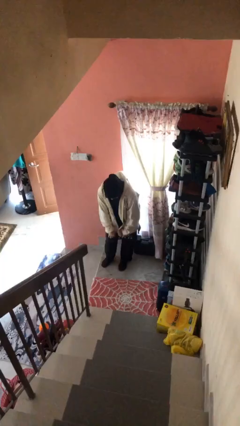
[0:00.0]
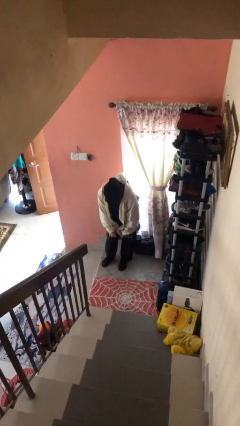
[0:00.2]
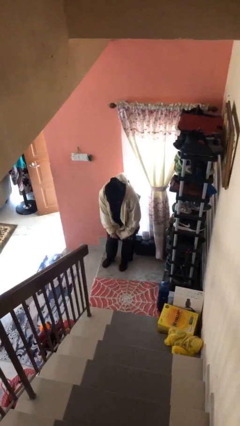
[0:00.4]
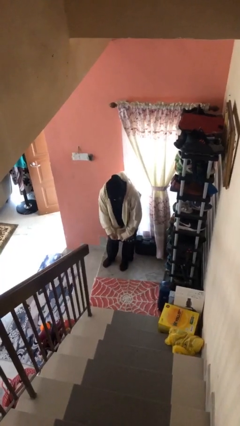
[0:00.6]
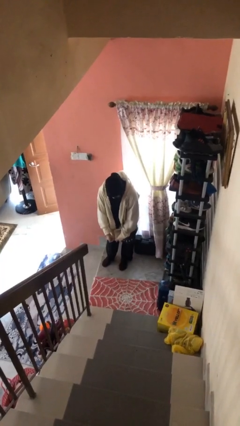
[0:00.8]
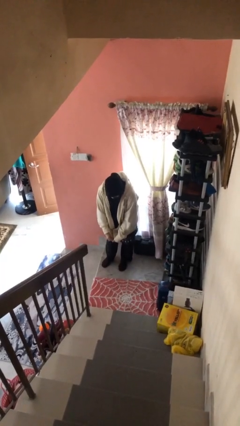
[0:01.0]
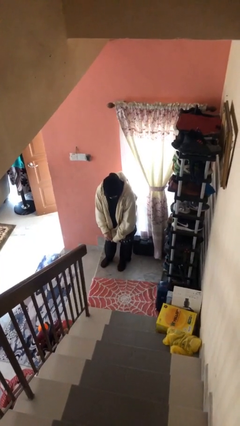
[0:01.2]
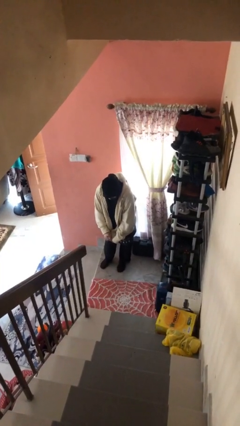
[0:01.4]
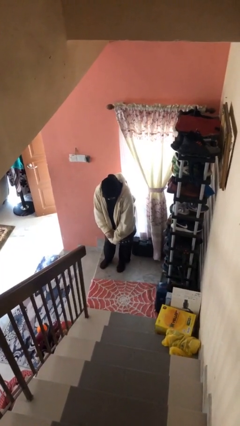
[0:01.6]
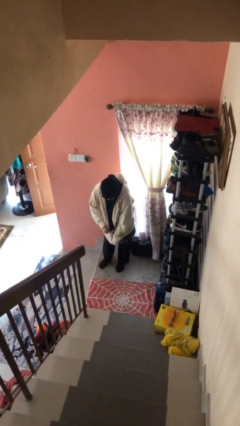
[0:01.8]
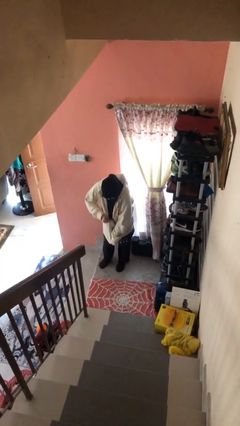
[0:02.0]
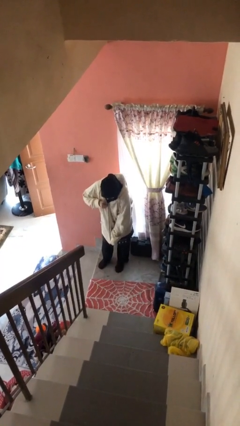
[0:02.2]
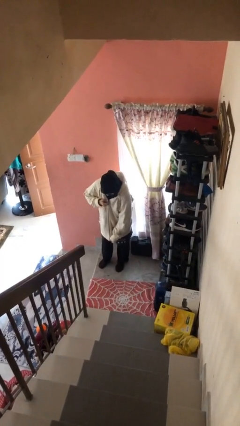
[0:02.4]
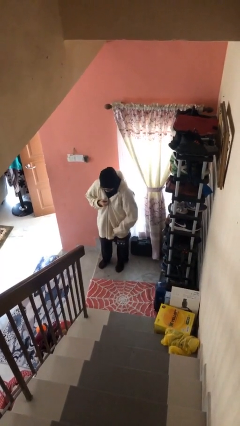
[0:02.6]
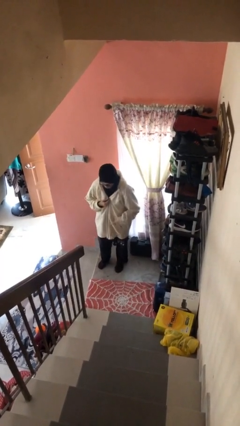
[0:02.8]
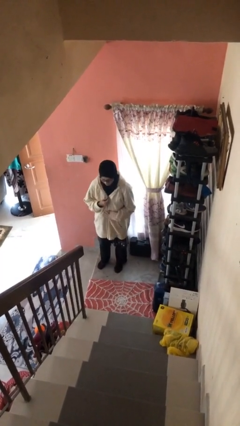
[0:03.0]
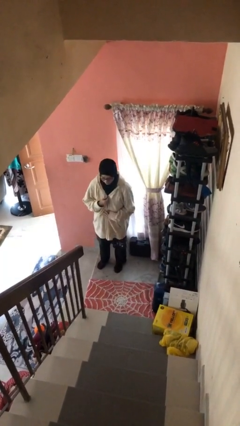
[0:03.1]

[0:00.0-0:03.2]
person zips up jacket

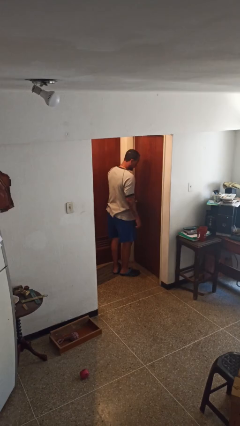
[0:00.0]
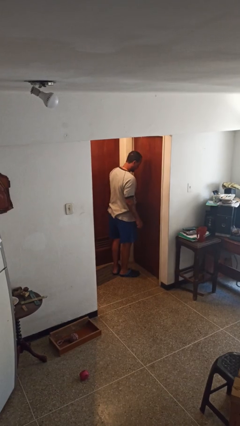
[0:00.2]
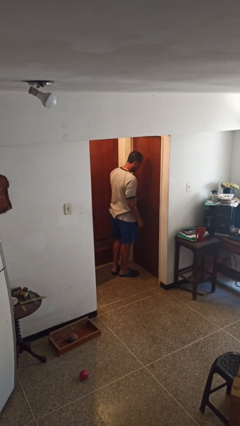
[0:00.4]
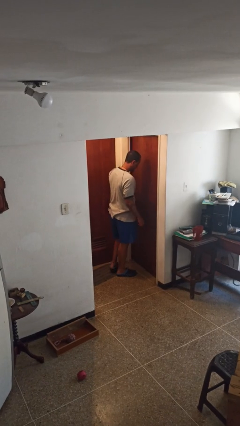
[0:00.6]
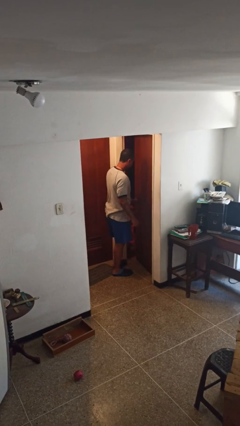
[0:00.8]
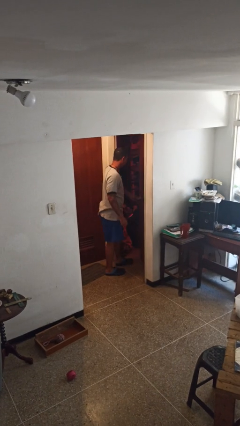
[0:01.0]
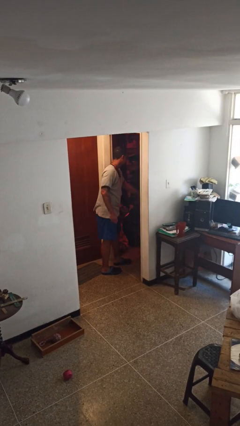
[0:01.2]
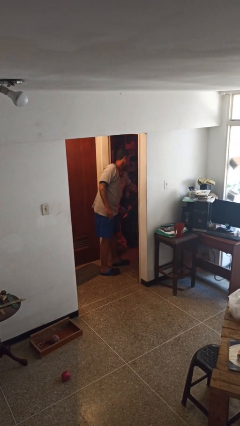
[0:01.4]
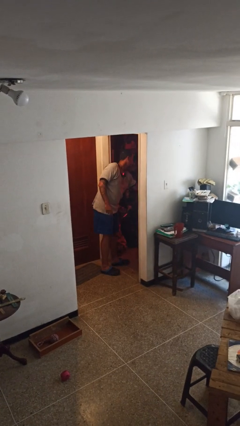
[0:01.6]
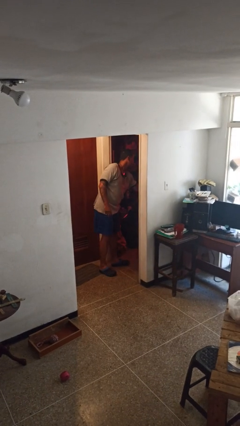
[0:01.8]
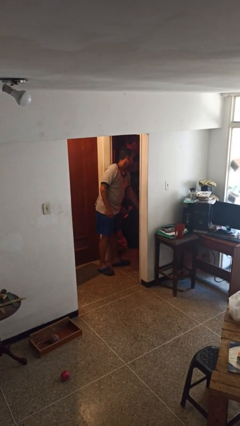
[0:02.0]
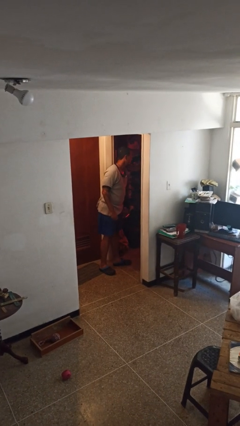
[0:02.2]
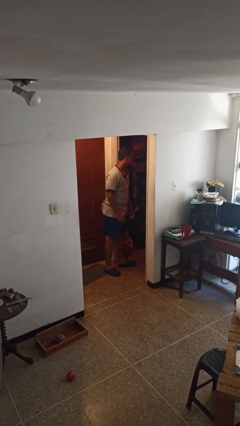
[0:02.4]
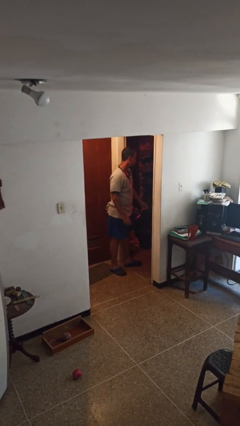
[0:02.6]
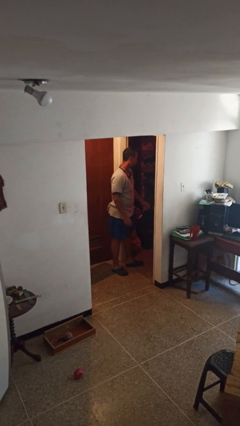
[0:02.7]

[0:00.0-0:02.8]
person opens facility door

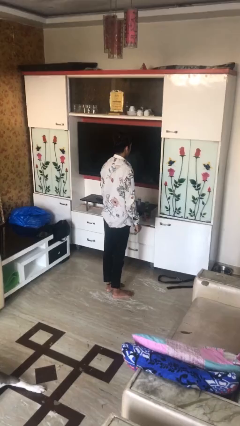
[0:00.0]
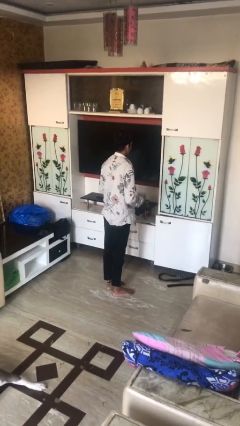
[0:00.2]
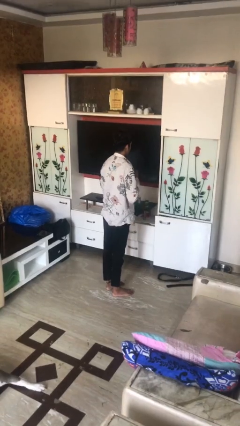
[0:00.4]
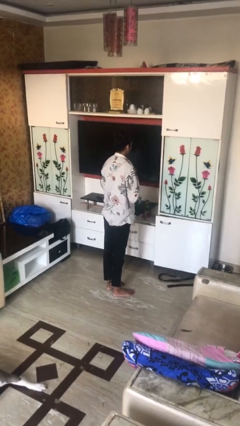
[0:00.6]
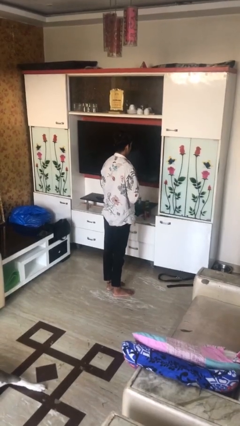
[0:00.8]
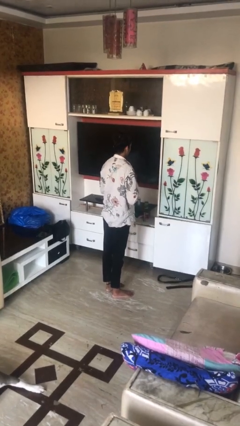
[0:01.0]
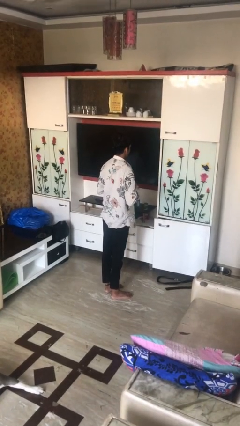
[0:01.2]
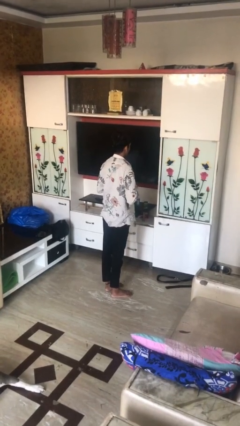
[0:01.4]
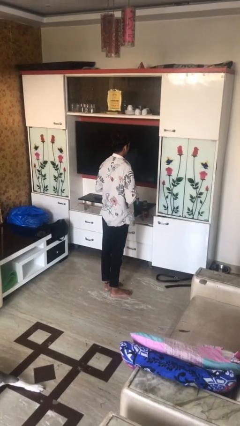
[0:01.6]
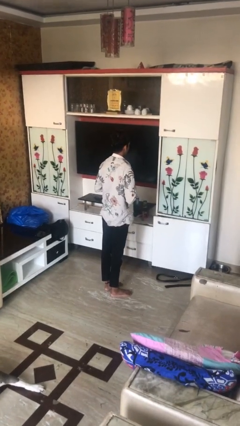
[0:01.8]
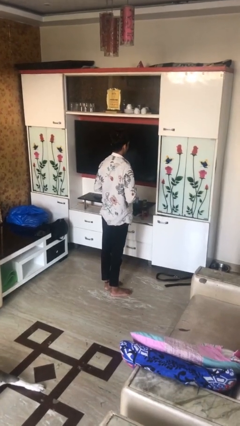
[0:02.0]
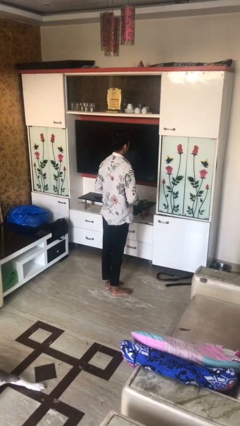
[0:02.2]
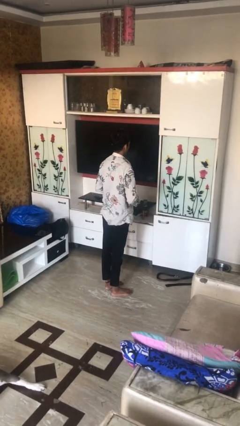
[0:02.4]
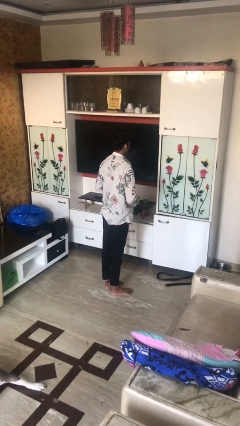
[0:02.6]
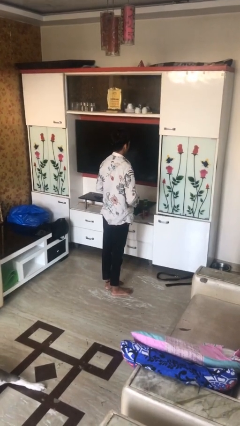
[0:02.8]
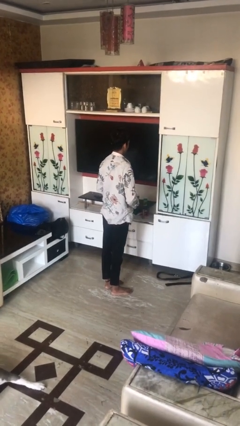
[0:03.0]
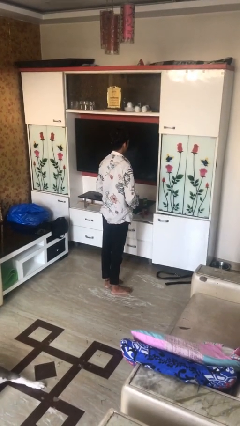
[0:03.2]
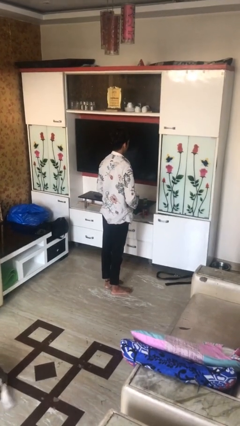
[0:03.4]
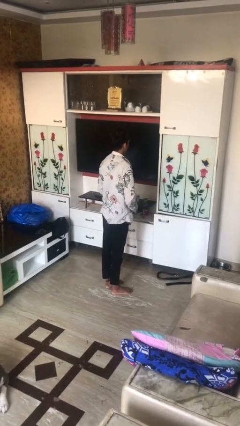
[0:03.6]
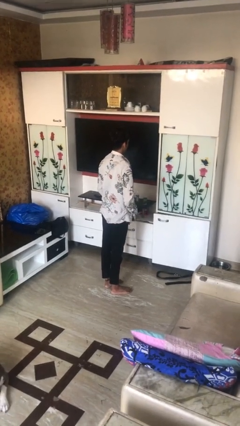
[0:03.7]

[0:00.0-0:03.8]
person unbuttons shirt

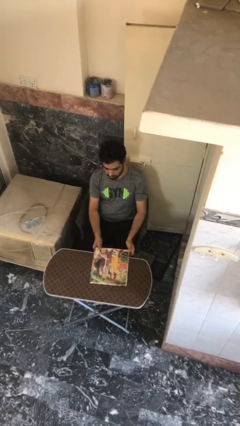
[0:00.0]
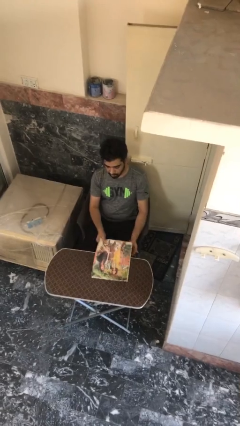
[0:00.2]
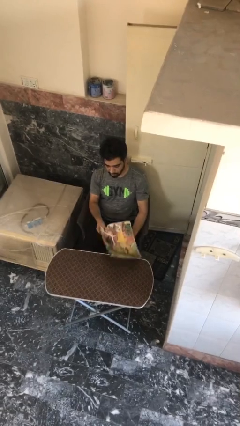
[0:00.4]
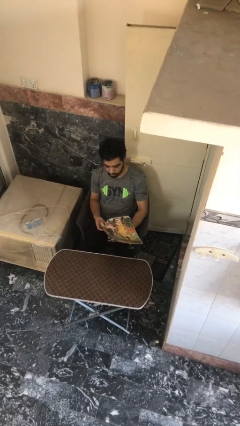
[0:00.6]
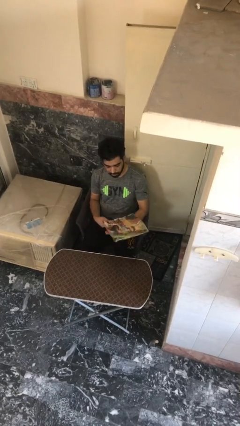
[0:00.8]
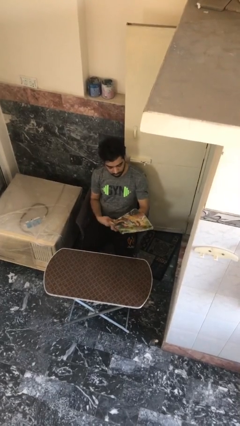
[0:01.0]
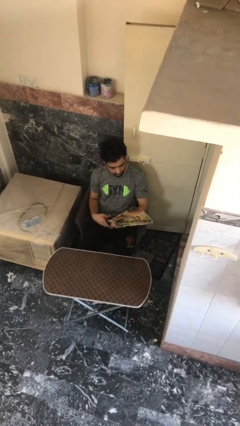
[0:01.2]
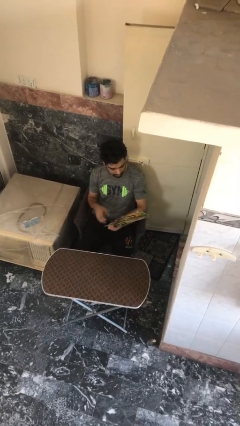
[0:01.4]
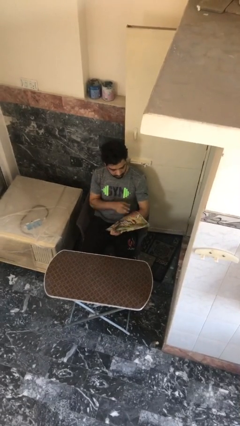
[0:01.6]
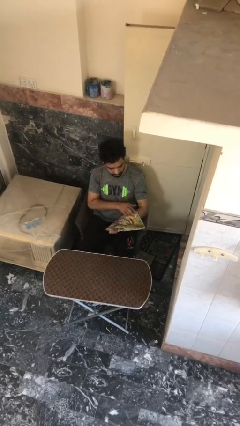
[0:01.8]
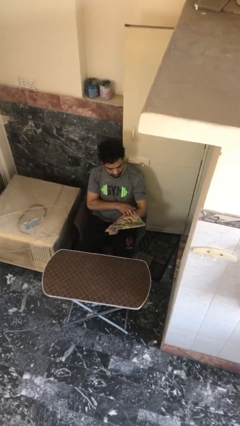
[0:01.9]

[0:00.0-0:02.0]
person picks up object from table

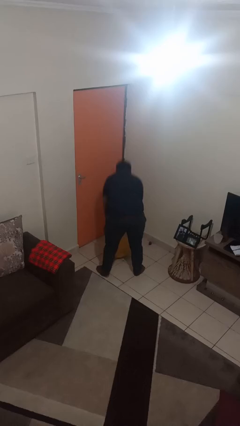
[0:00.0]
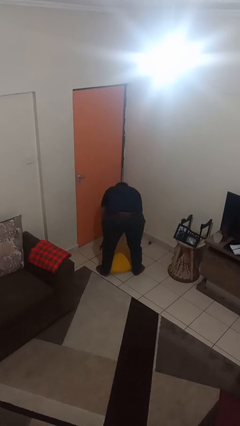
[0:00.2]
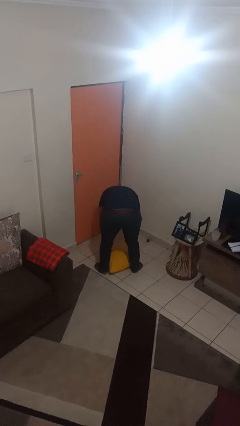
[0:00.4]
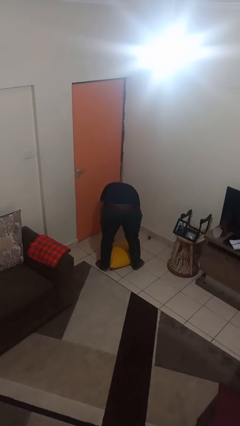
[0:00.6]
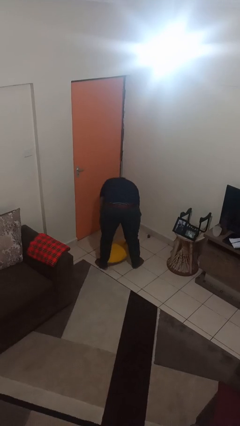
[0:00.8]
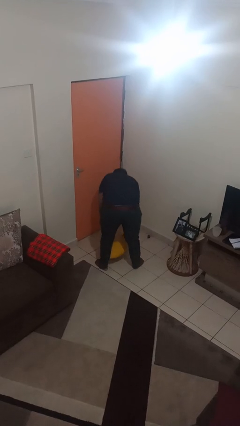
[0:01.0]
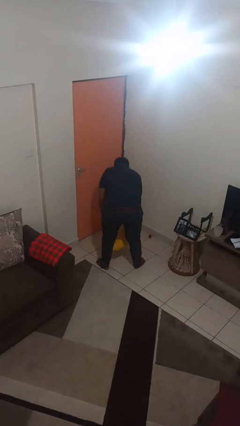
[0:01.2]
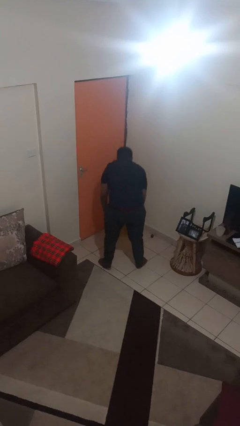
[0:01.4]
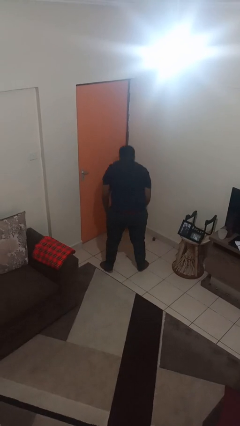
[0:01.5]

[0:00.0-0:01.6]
person catches dropped object

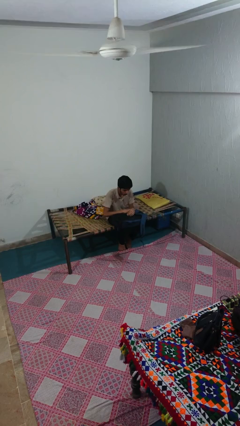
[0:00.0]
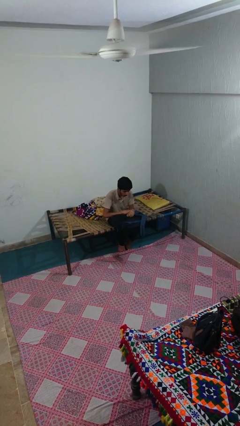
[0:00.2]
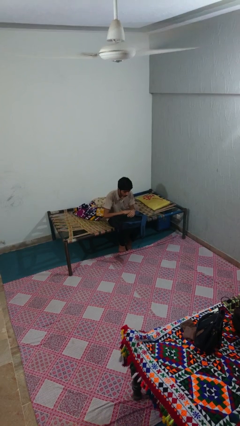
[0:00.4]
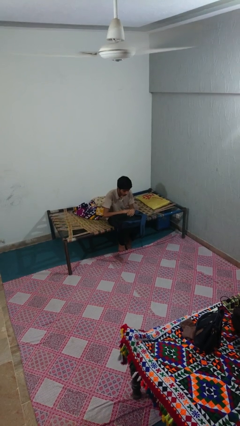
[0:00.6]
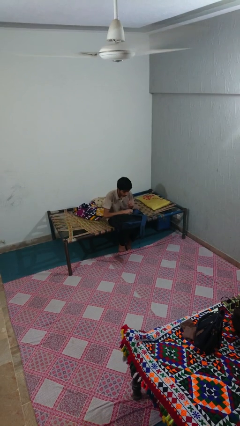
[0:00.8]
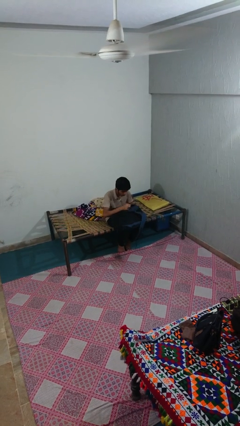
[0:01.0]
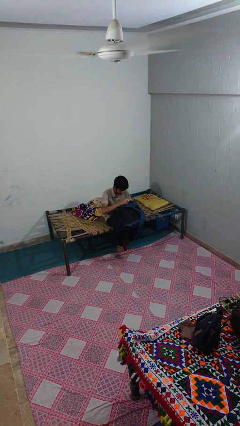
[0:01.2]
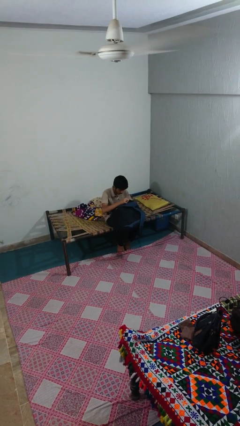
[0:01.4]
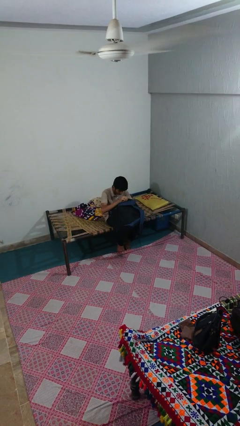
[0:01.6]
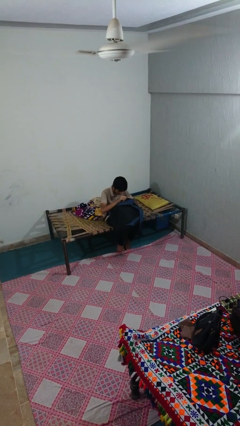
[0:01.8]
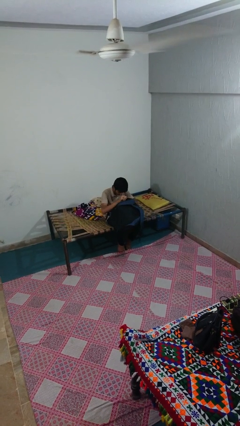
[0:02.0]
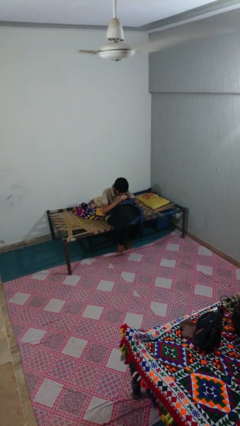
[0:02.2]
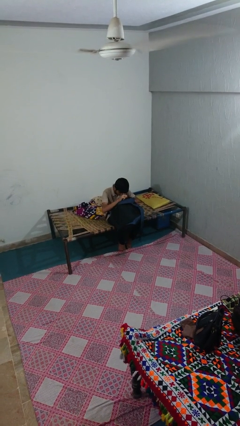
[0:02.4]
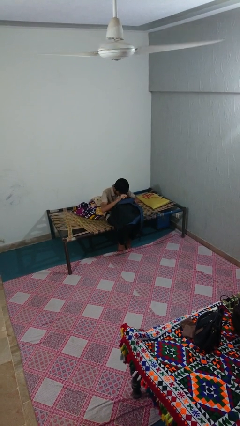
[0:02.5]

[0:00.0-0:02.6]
person searches in backpack

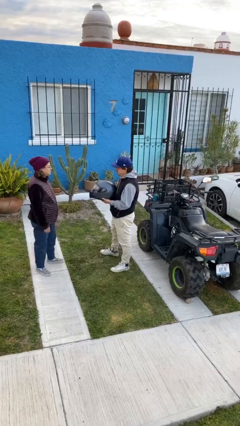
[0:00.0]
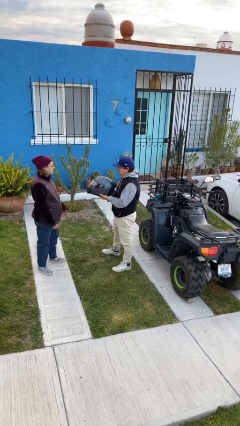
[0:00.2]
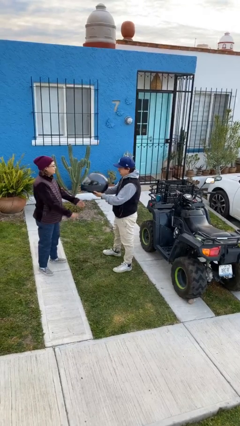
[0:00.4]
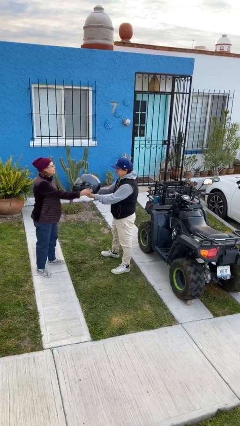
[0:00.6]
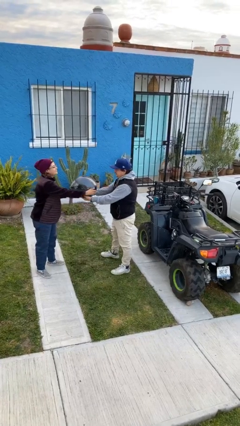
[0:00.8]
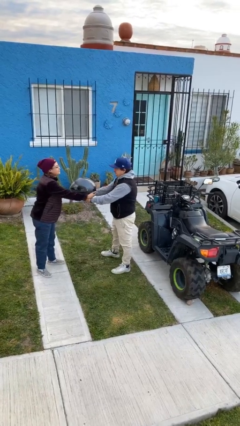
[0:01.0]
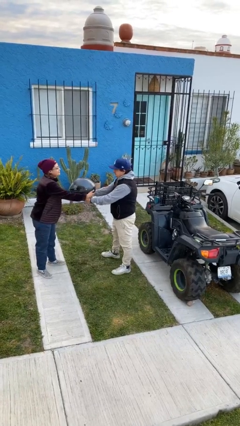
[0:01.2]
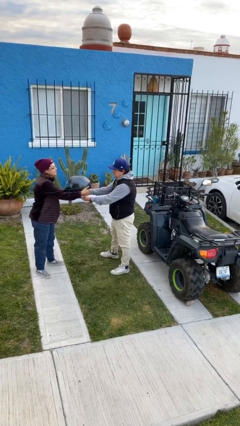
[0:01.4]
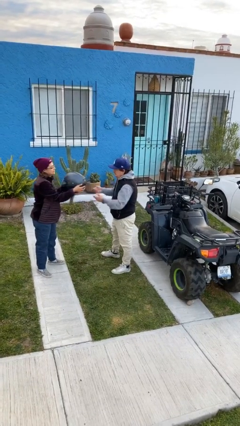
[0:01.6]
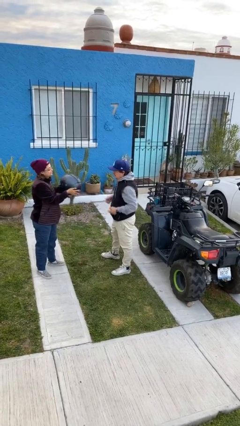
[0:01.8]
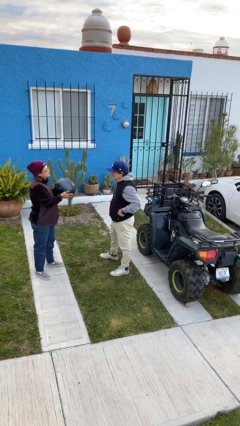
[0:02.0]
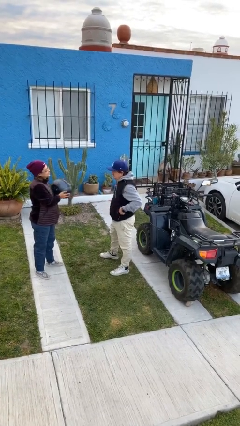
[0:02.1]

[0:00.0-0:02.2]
person transfers object to person
